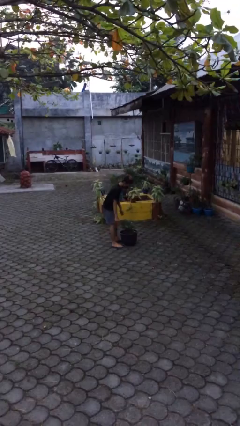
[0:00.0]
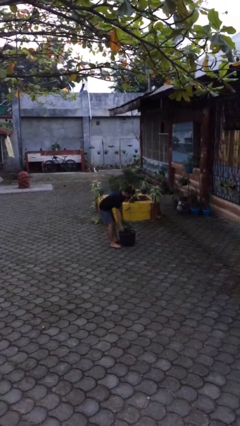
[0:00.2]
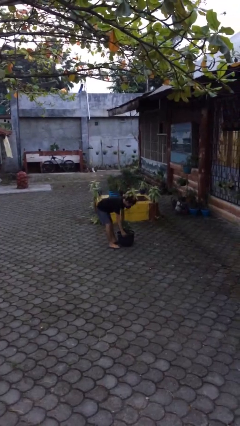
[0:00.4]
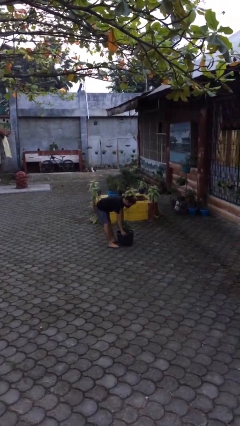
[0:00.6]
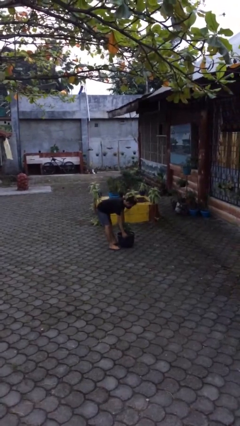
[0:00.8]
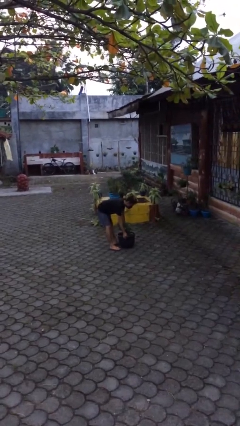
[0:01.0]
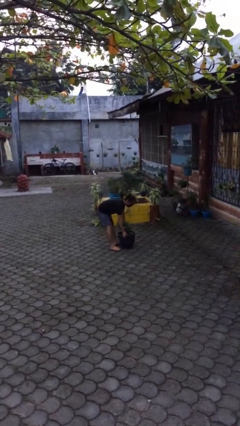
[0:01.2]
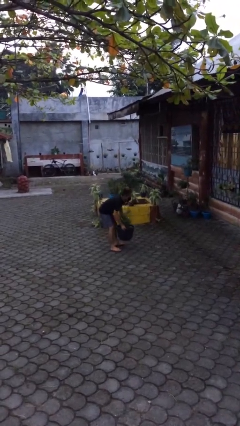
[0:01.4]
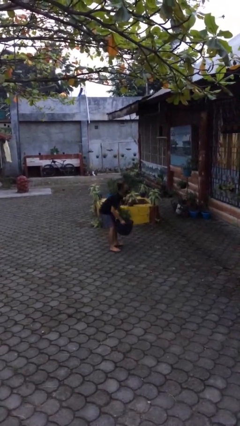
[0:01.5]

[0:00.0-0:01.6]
person picks up object from floor

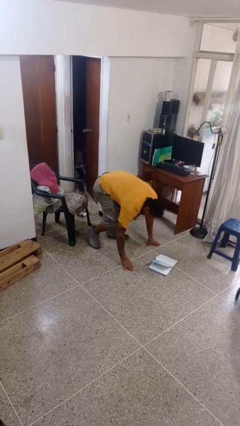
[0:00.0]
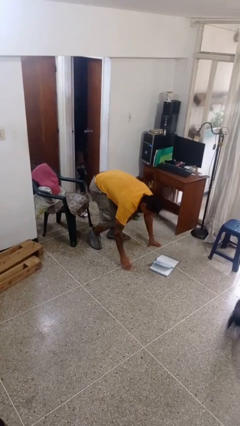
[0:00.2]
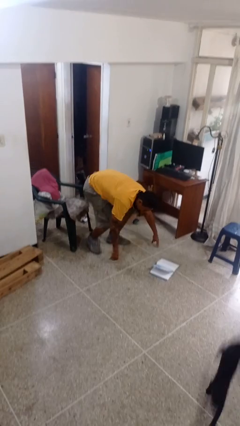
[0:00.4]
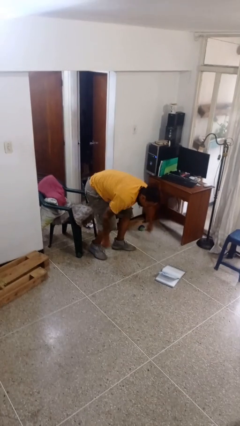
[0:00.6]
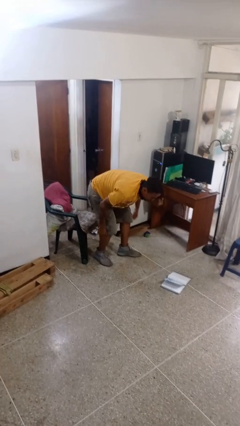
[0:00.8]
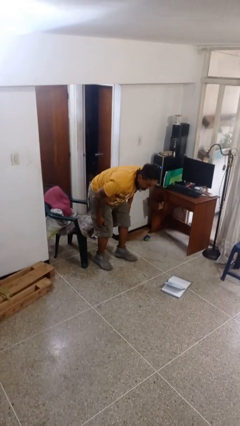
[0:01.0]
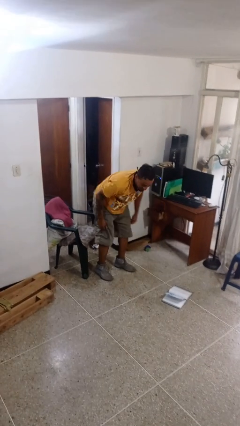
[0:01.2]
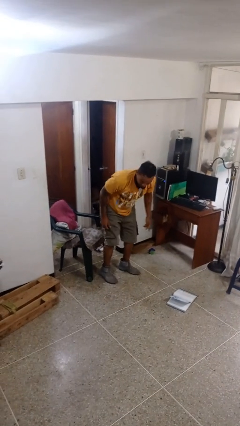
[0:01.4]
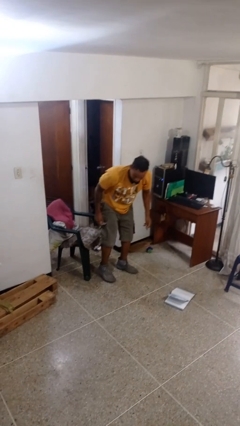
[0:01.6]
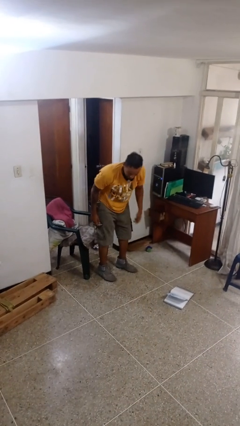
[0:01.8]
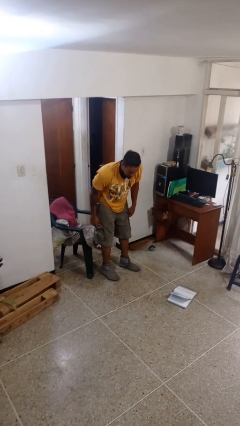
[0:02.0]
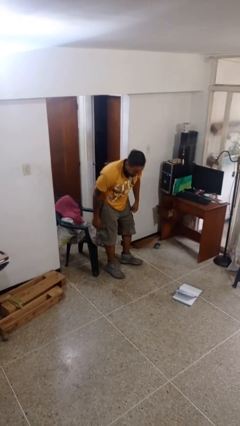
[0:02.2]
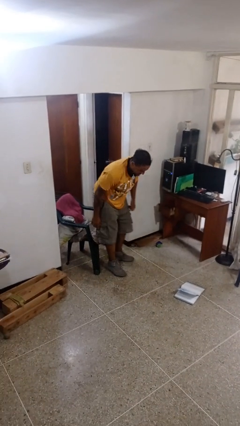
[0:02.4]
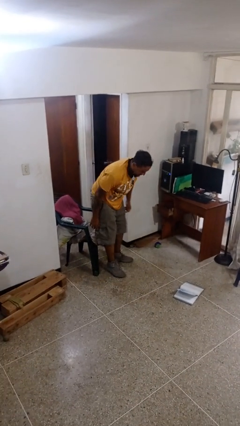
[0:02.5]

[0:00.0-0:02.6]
person stands up from floor

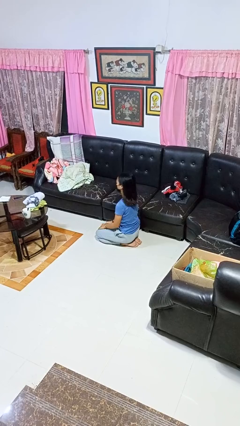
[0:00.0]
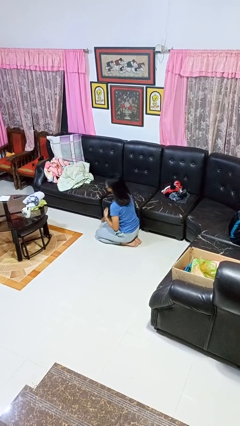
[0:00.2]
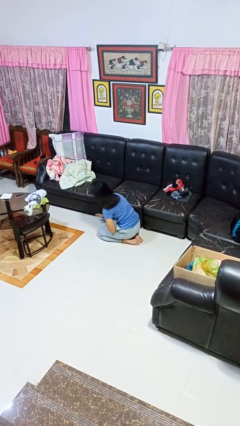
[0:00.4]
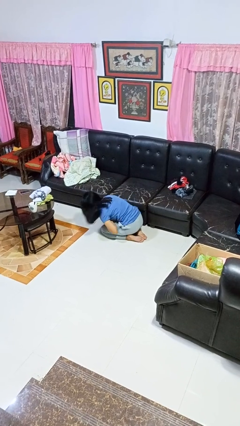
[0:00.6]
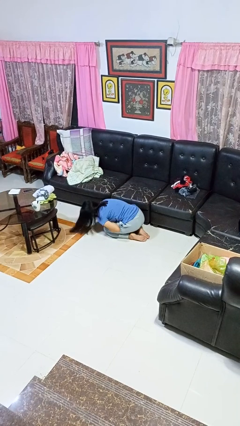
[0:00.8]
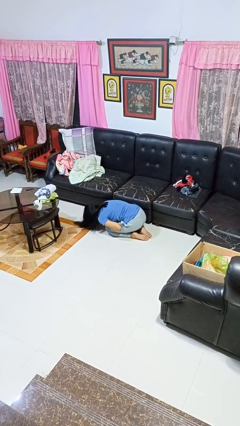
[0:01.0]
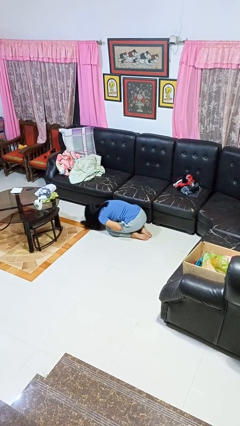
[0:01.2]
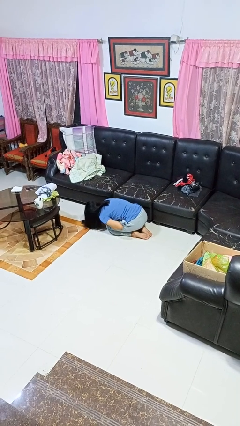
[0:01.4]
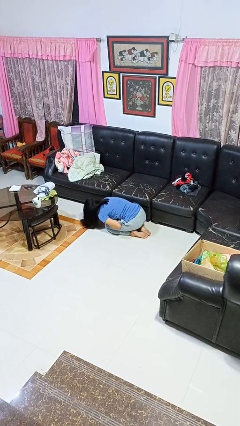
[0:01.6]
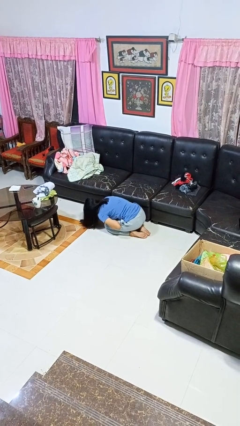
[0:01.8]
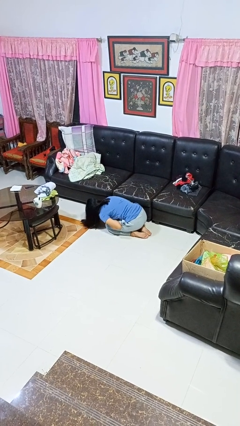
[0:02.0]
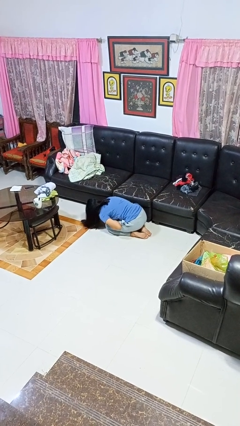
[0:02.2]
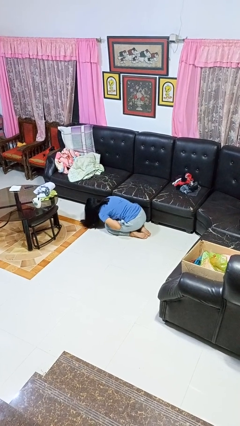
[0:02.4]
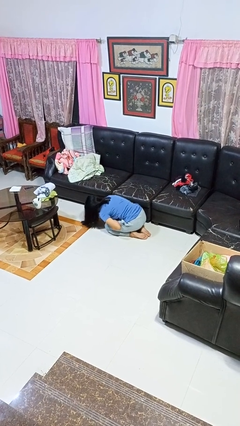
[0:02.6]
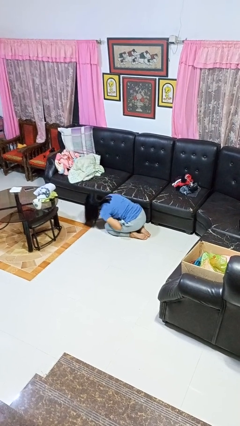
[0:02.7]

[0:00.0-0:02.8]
person searches under couch

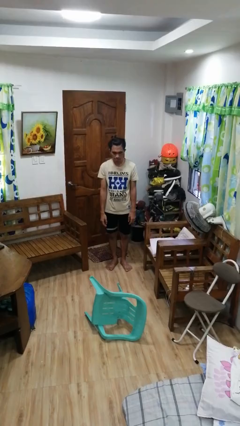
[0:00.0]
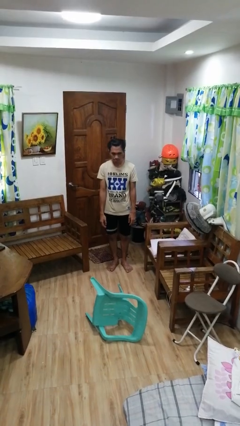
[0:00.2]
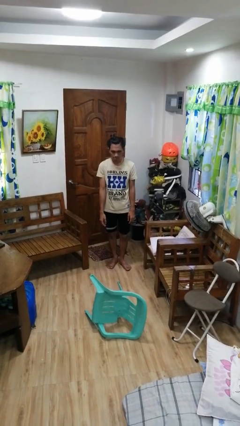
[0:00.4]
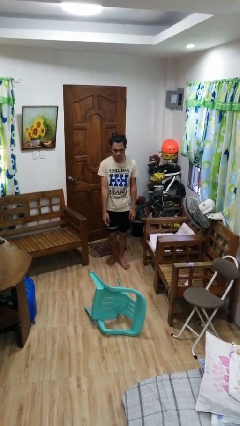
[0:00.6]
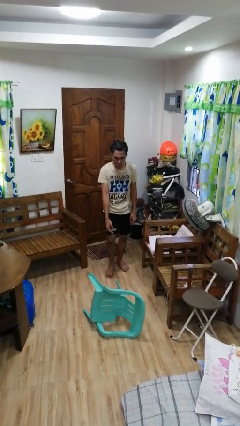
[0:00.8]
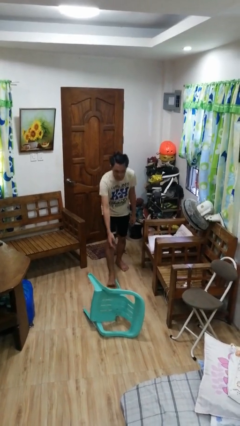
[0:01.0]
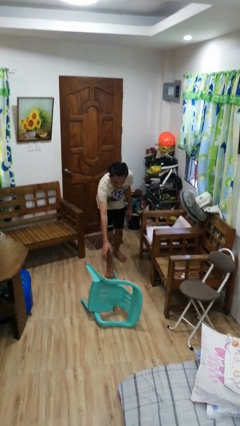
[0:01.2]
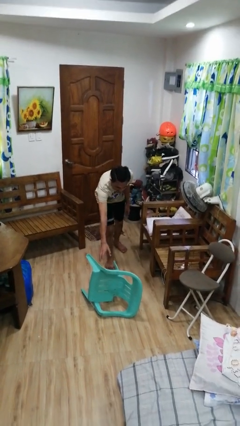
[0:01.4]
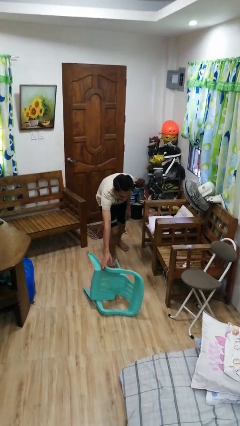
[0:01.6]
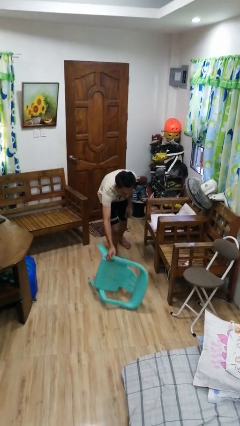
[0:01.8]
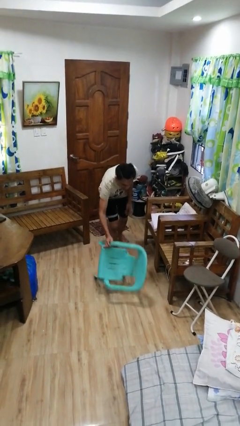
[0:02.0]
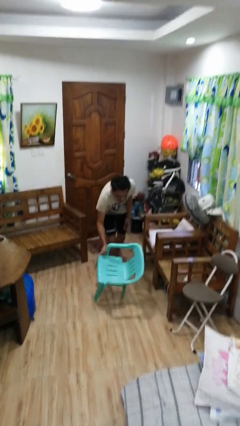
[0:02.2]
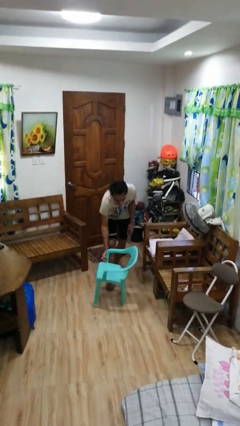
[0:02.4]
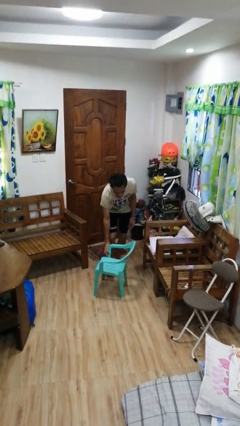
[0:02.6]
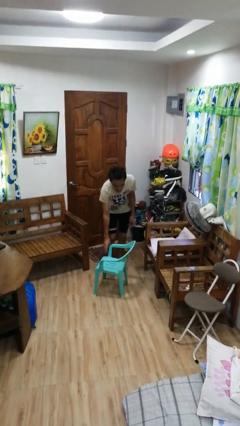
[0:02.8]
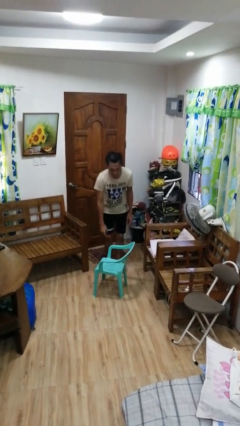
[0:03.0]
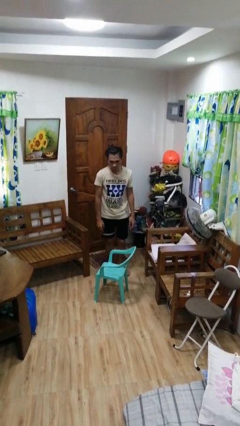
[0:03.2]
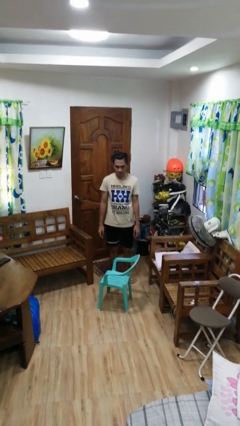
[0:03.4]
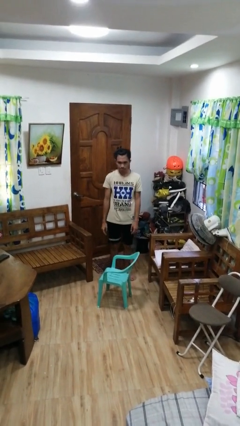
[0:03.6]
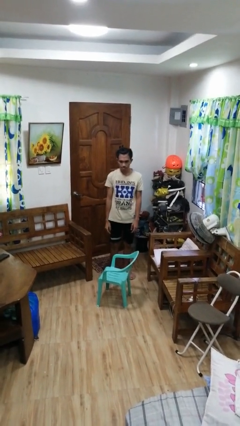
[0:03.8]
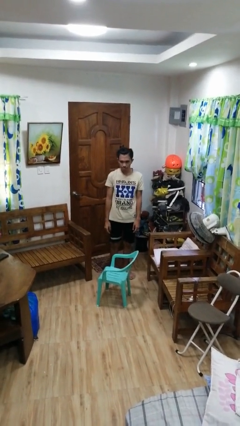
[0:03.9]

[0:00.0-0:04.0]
person sets upright furniture

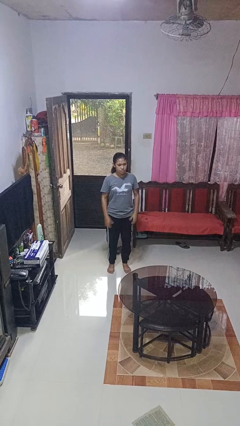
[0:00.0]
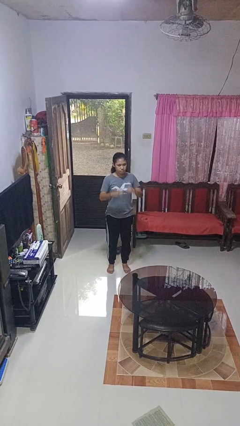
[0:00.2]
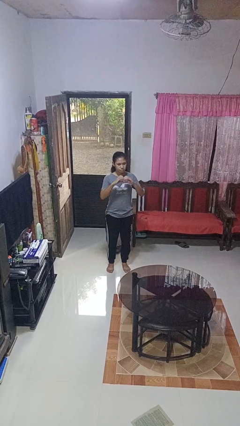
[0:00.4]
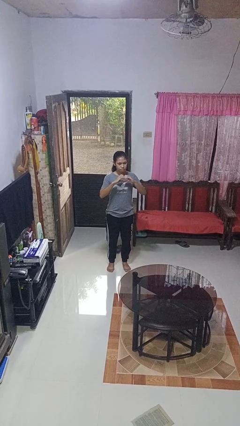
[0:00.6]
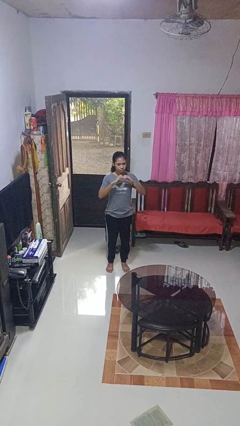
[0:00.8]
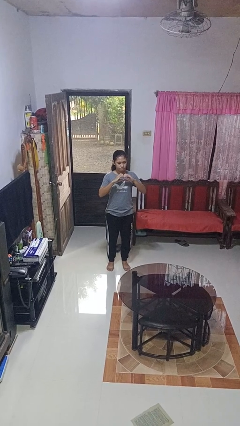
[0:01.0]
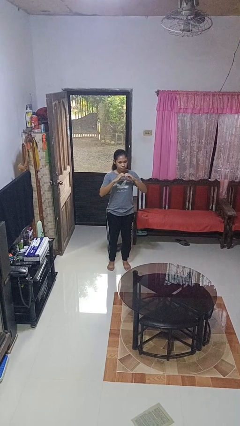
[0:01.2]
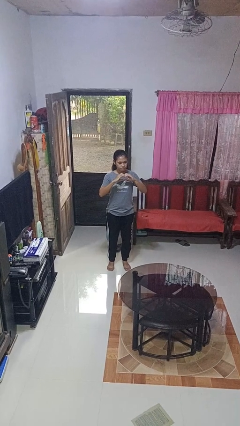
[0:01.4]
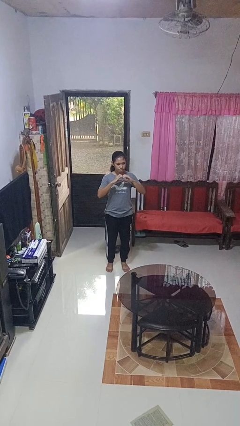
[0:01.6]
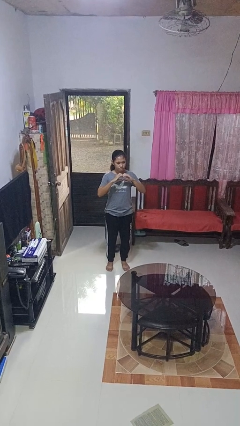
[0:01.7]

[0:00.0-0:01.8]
person gestures heart

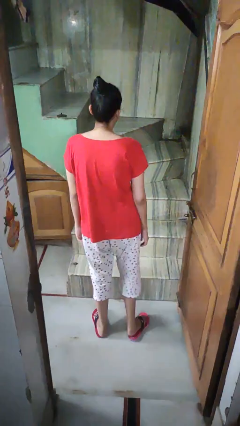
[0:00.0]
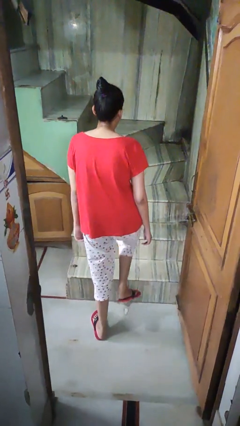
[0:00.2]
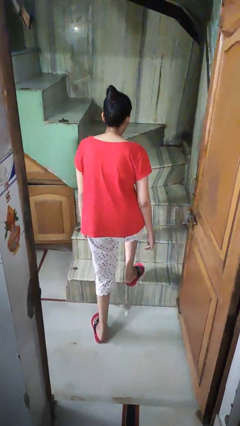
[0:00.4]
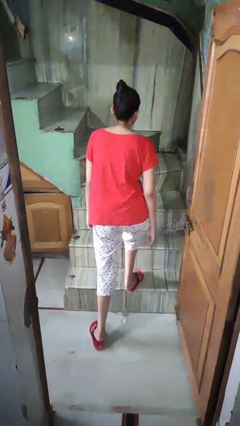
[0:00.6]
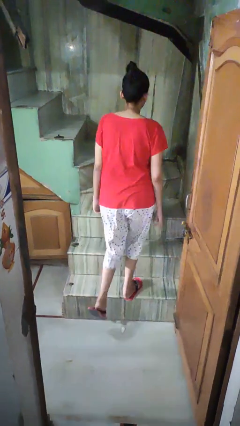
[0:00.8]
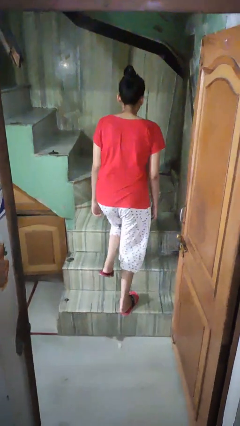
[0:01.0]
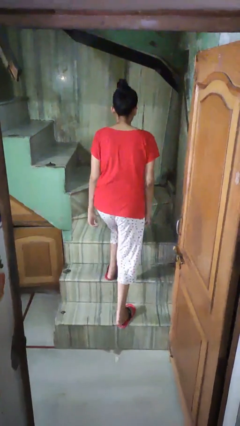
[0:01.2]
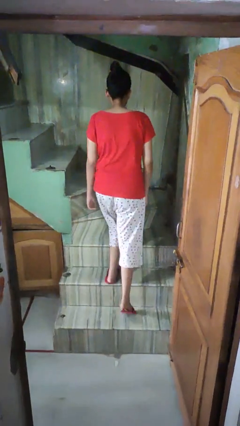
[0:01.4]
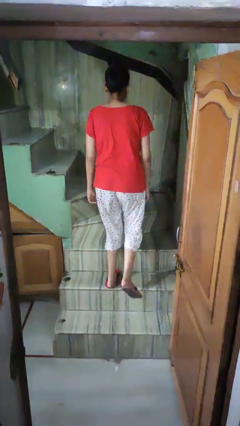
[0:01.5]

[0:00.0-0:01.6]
person climbs up stairs

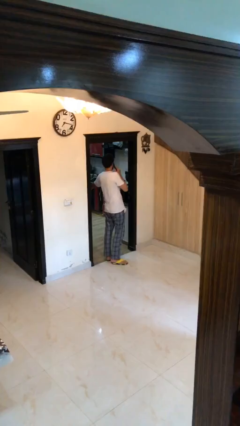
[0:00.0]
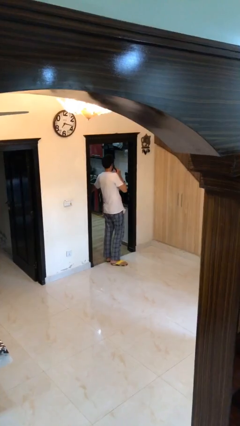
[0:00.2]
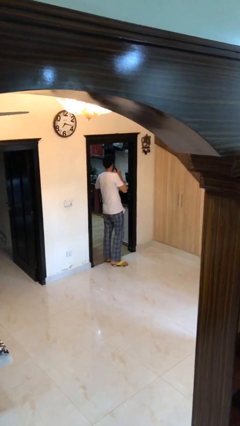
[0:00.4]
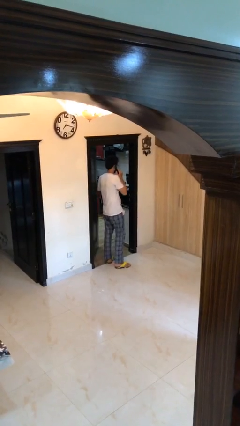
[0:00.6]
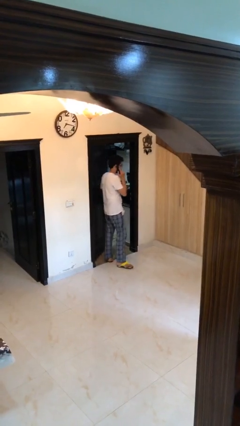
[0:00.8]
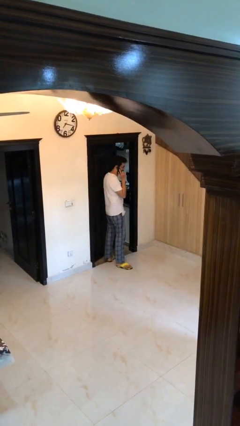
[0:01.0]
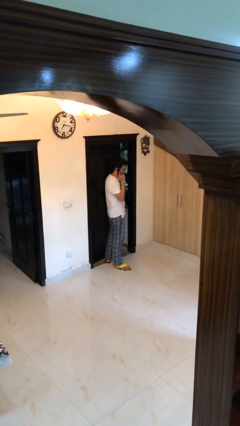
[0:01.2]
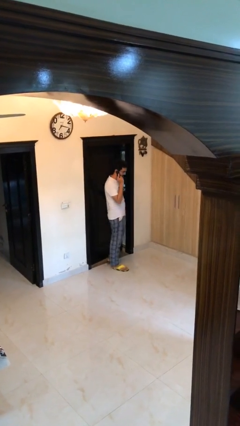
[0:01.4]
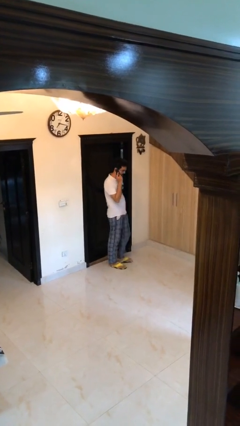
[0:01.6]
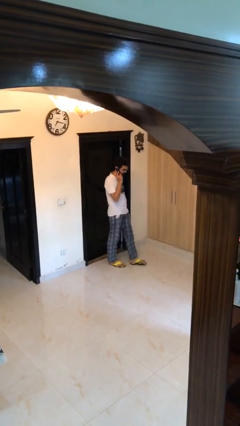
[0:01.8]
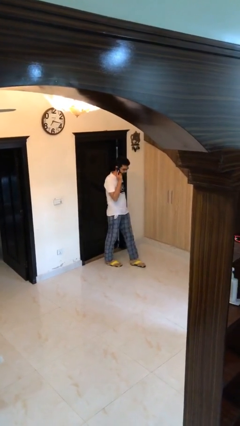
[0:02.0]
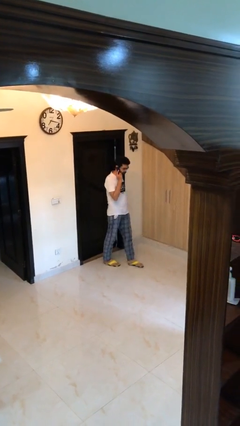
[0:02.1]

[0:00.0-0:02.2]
person closes facility door

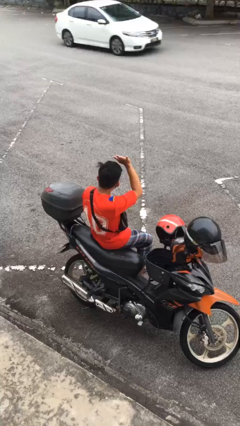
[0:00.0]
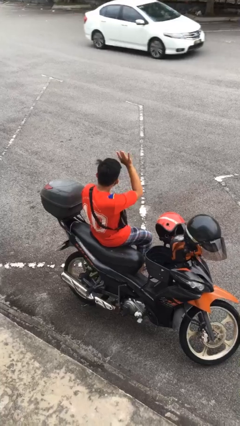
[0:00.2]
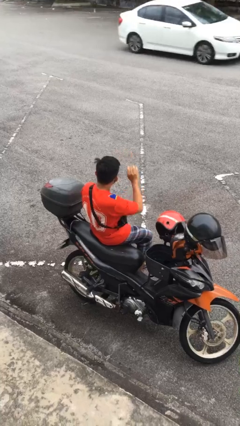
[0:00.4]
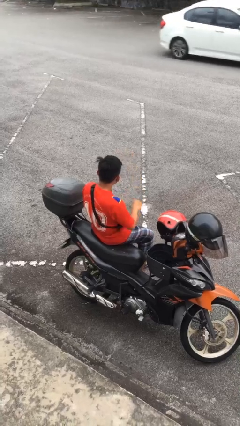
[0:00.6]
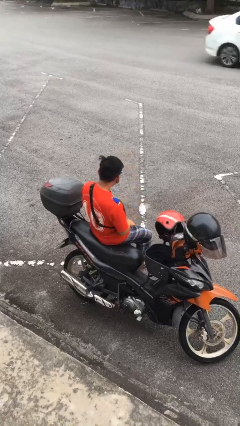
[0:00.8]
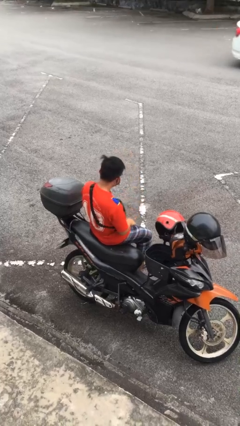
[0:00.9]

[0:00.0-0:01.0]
person gestures lower hand
